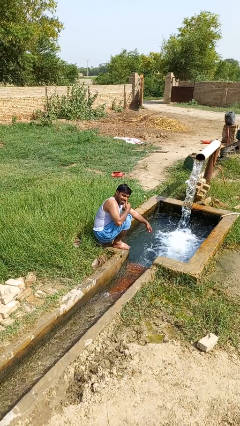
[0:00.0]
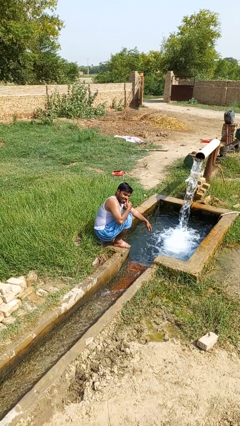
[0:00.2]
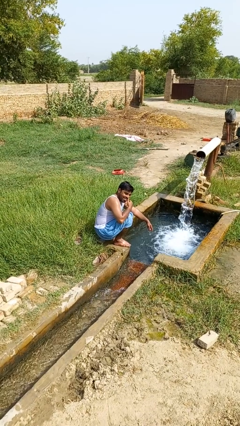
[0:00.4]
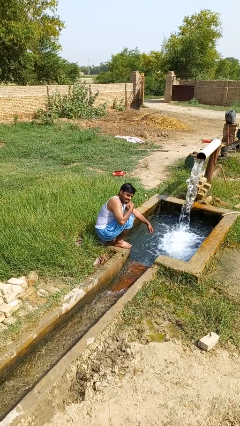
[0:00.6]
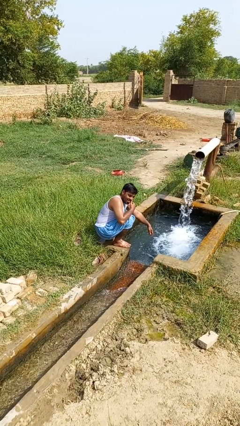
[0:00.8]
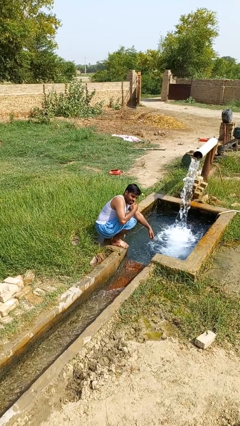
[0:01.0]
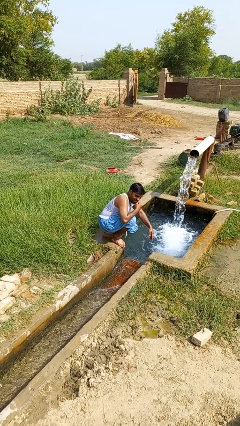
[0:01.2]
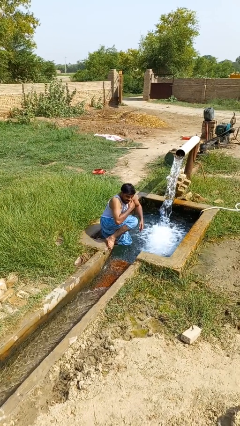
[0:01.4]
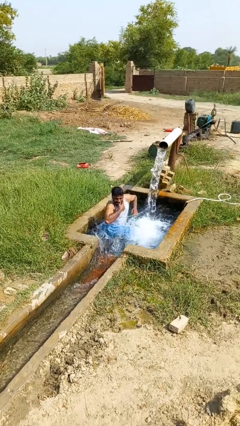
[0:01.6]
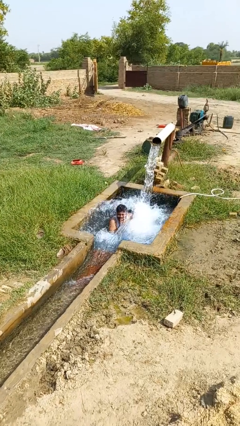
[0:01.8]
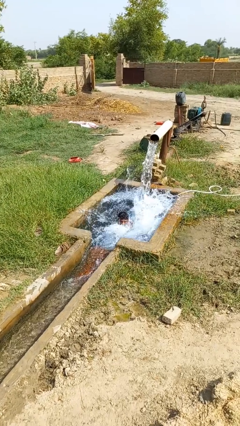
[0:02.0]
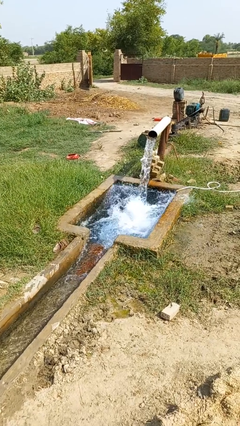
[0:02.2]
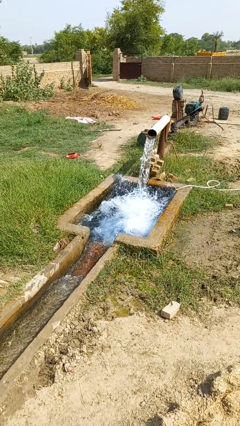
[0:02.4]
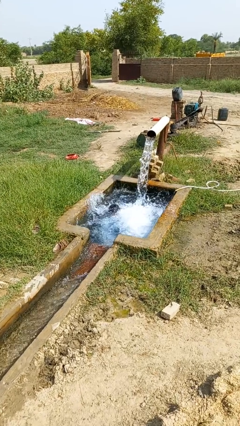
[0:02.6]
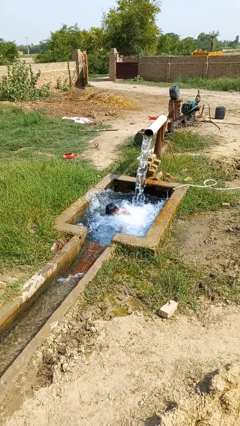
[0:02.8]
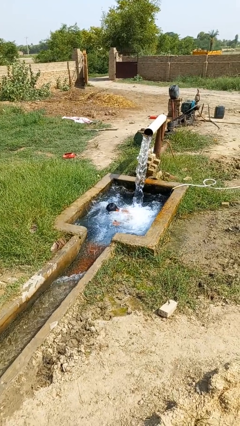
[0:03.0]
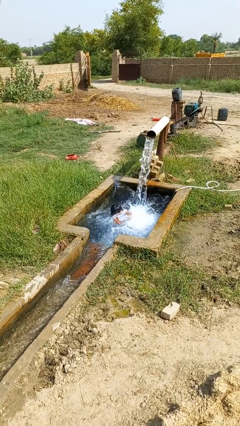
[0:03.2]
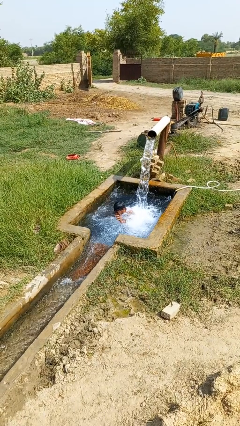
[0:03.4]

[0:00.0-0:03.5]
person falls into pool

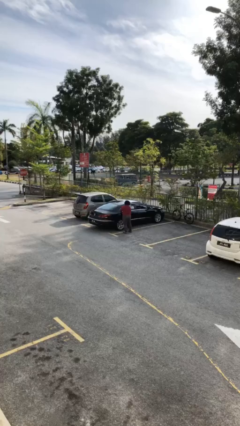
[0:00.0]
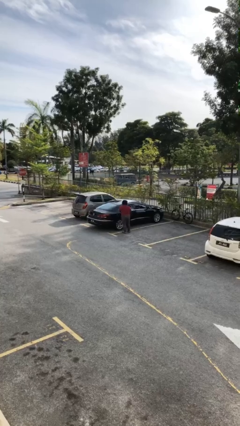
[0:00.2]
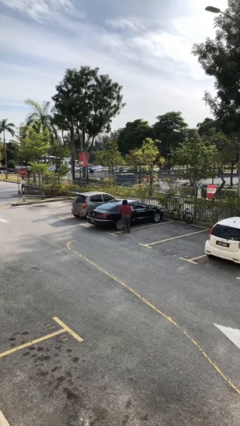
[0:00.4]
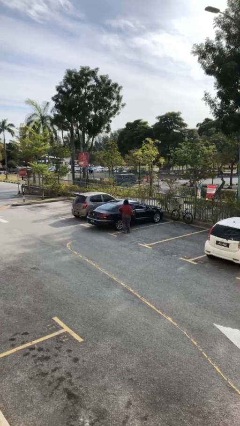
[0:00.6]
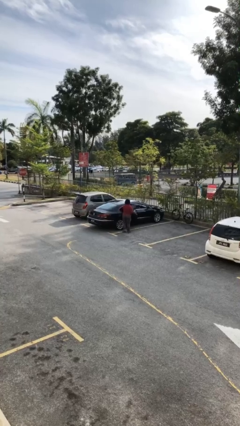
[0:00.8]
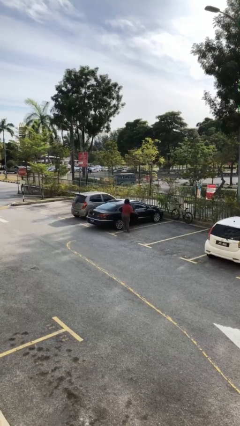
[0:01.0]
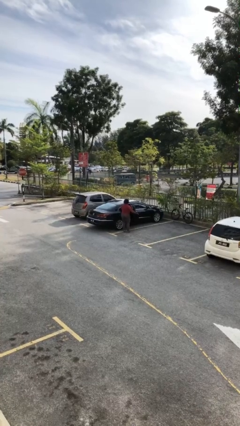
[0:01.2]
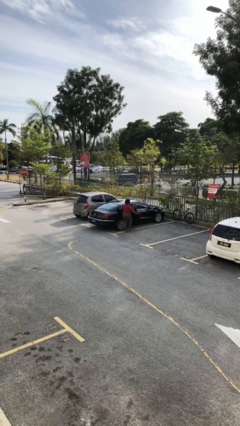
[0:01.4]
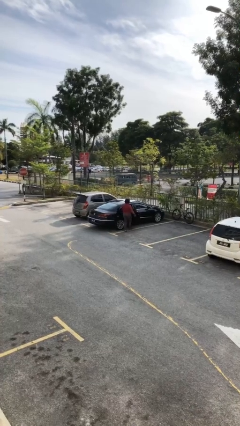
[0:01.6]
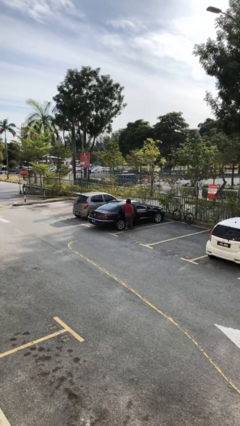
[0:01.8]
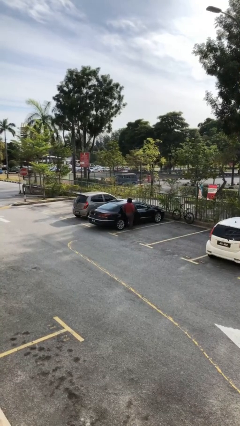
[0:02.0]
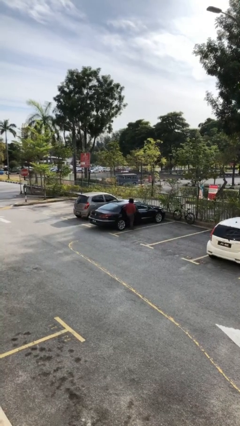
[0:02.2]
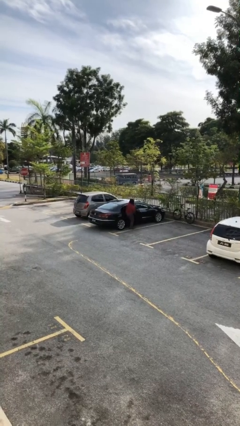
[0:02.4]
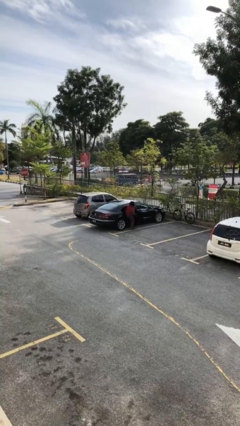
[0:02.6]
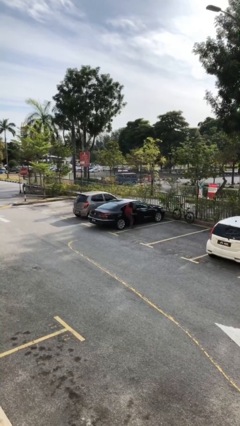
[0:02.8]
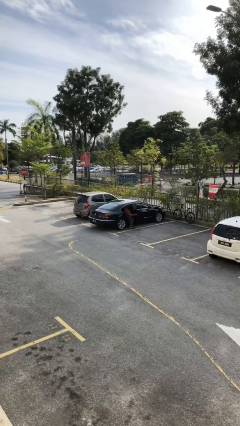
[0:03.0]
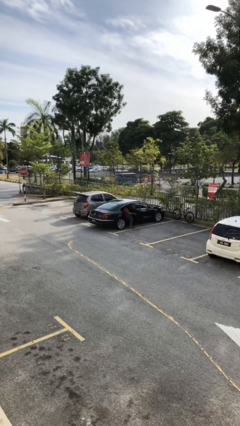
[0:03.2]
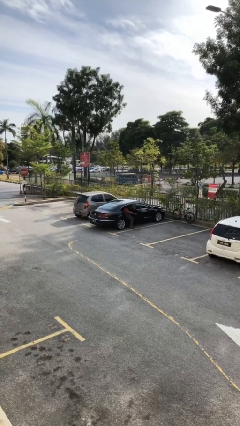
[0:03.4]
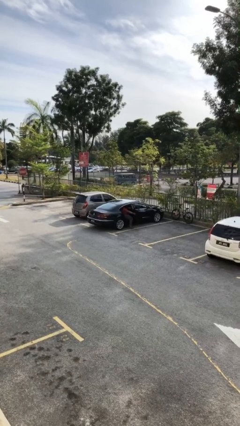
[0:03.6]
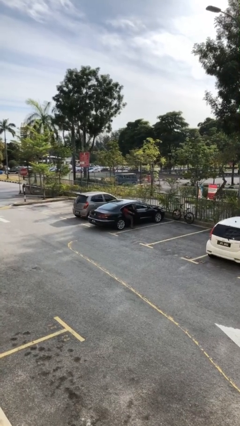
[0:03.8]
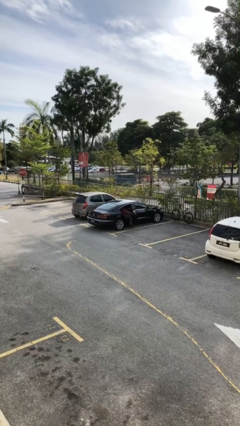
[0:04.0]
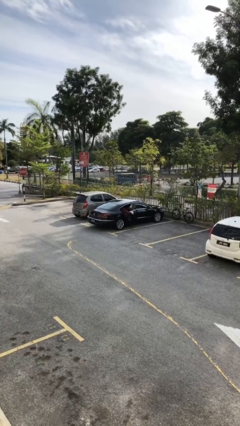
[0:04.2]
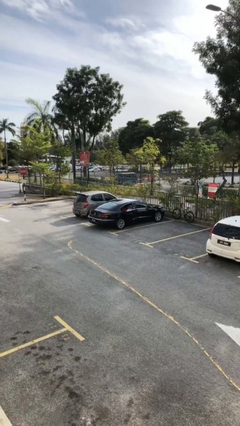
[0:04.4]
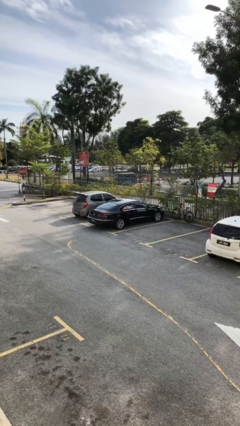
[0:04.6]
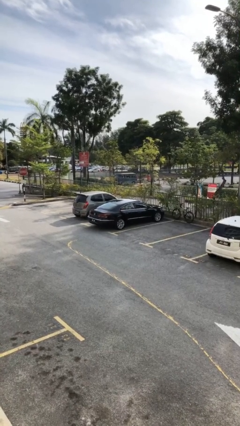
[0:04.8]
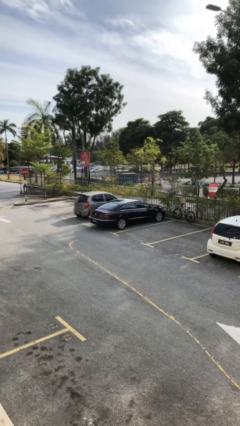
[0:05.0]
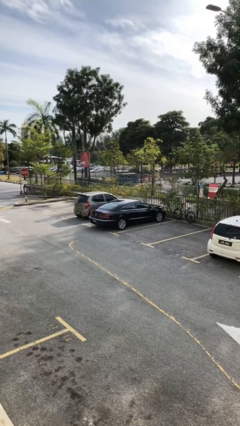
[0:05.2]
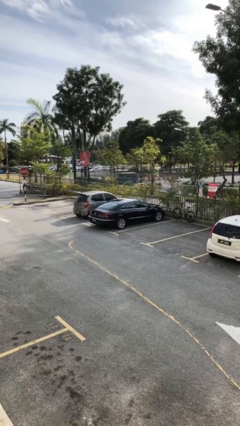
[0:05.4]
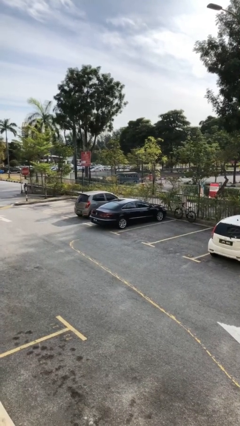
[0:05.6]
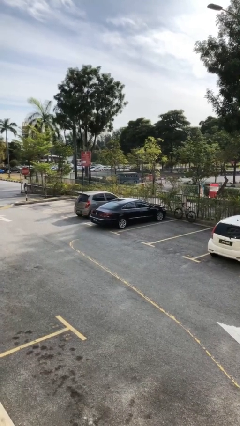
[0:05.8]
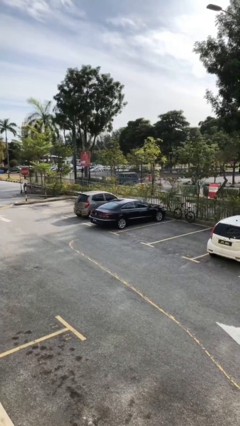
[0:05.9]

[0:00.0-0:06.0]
car picks up person

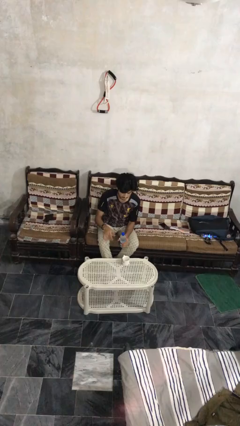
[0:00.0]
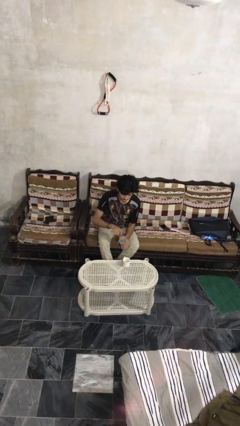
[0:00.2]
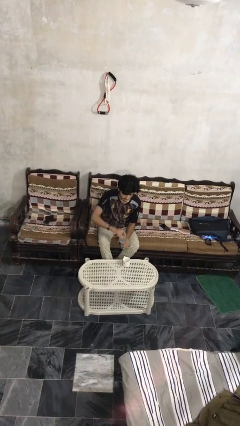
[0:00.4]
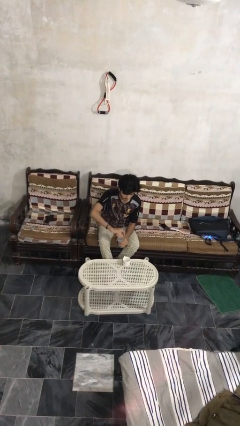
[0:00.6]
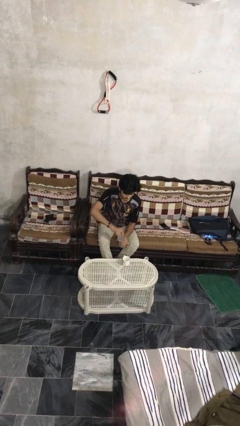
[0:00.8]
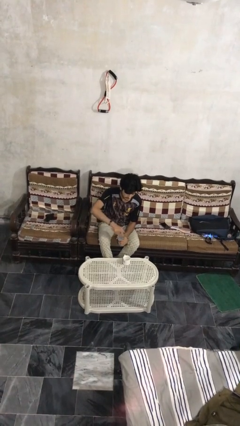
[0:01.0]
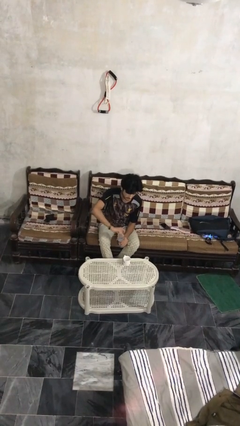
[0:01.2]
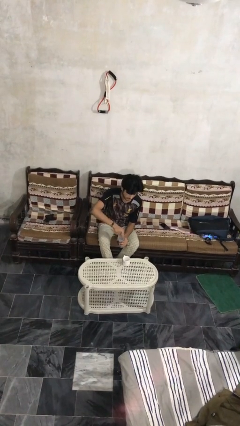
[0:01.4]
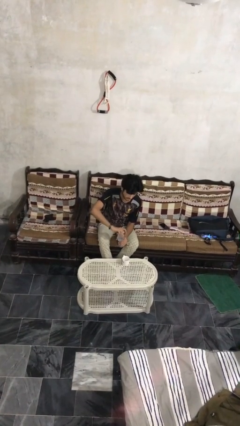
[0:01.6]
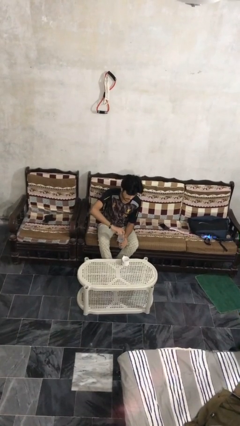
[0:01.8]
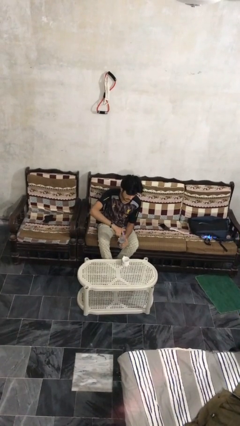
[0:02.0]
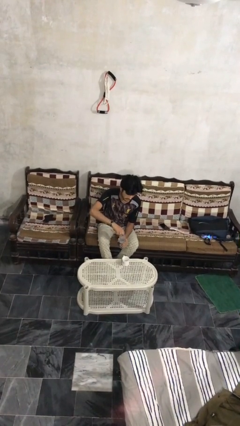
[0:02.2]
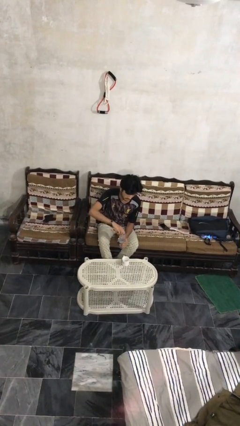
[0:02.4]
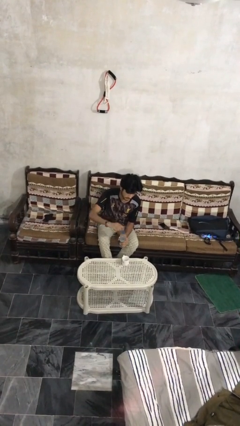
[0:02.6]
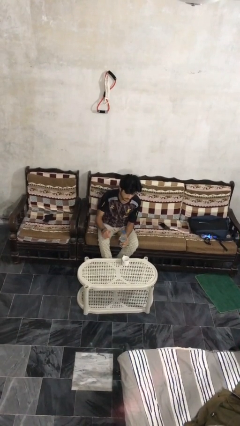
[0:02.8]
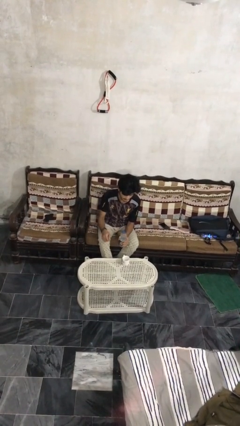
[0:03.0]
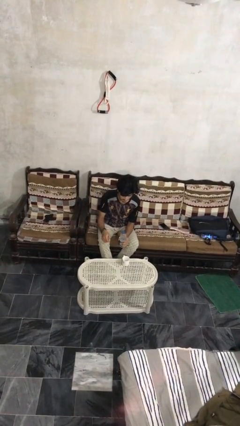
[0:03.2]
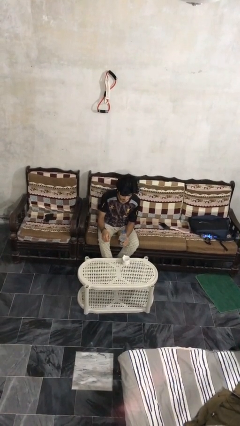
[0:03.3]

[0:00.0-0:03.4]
person unscrews lid from bottle

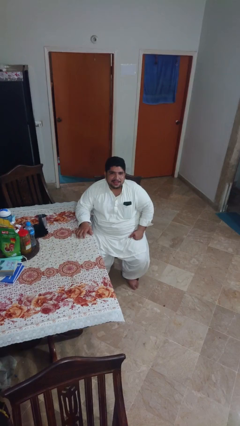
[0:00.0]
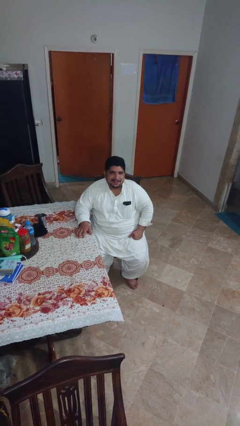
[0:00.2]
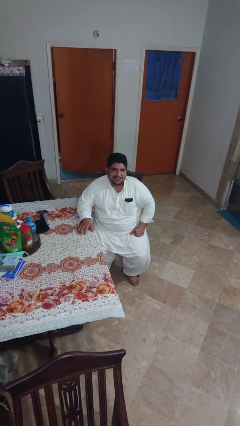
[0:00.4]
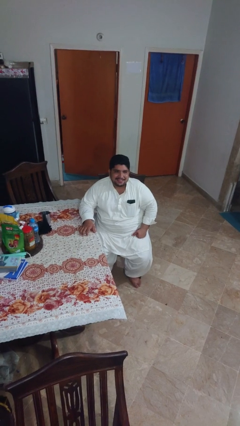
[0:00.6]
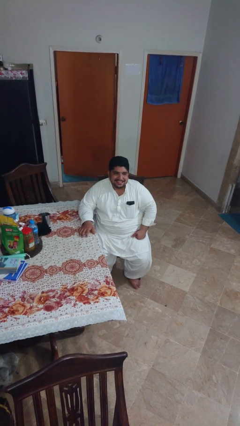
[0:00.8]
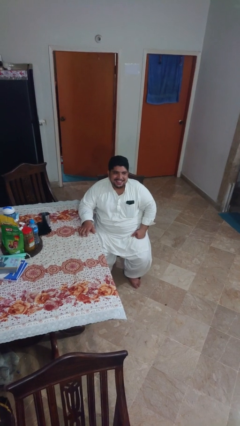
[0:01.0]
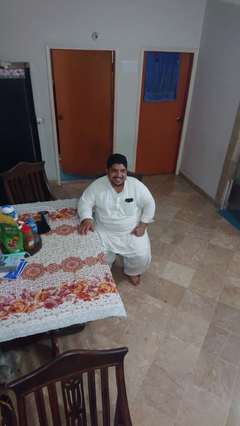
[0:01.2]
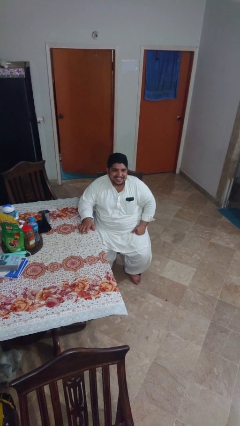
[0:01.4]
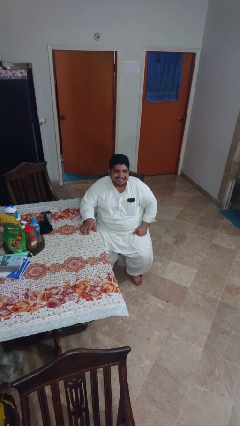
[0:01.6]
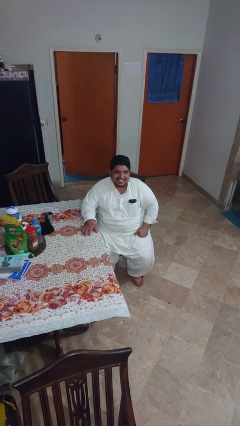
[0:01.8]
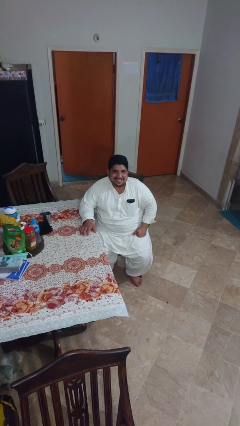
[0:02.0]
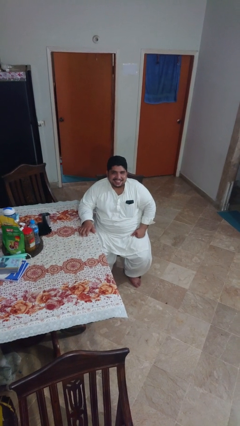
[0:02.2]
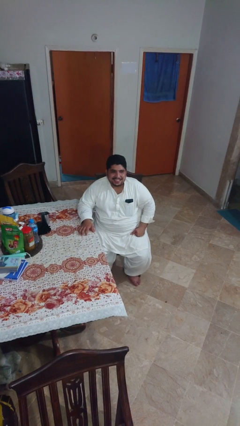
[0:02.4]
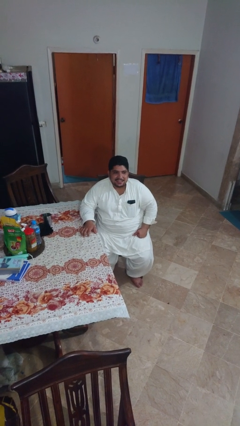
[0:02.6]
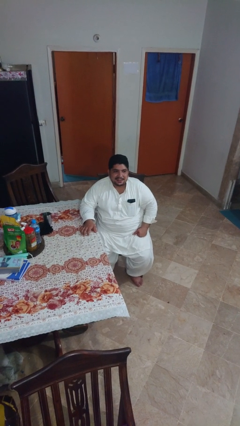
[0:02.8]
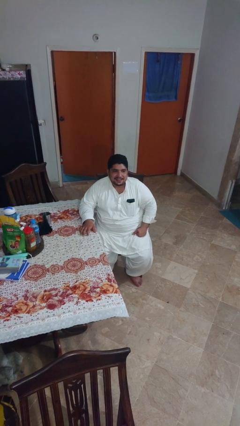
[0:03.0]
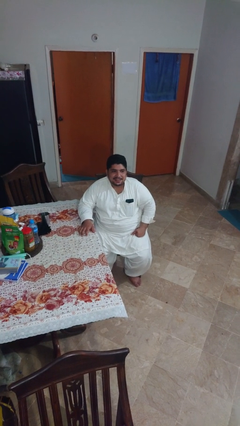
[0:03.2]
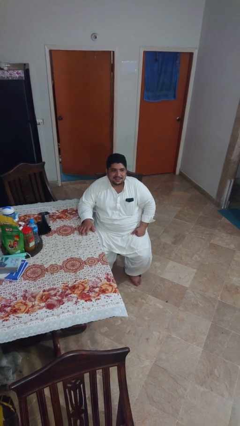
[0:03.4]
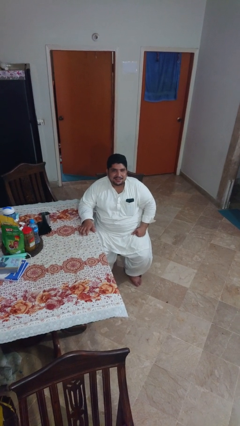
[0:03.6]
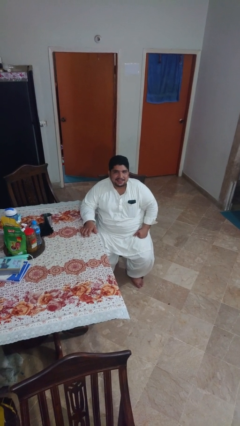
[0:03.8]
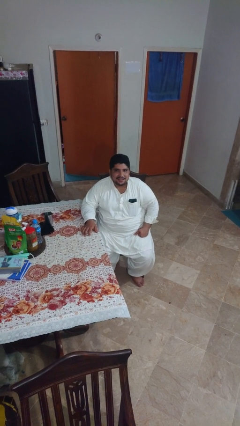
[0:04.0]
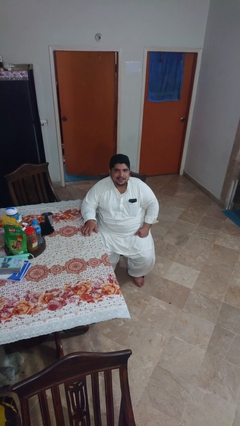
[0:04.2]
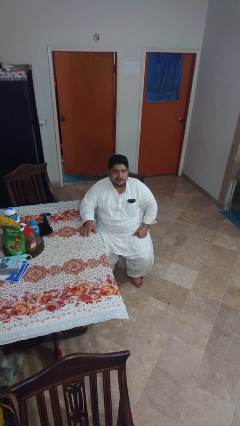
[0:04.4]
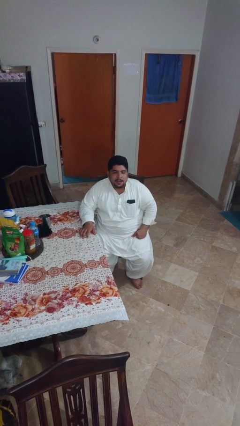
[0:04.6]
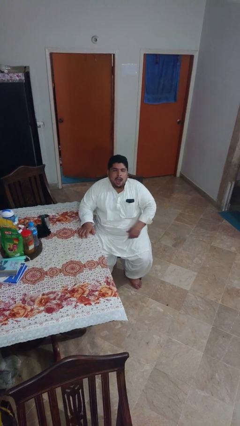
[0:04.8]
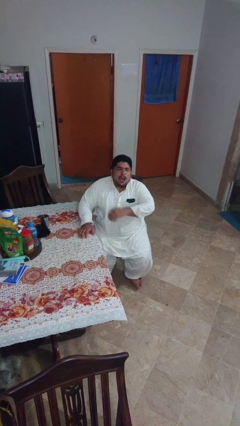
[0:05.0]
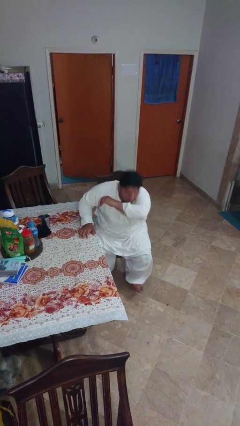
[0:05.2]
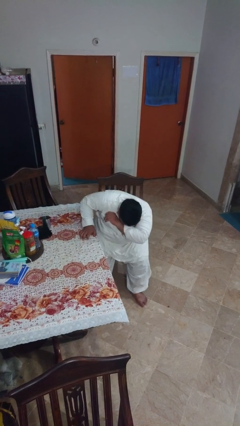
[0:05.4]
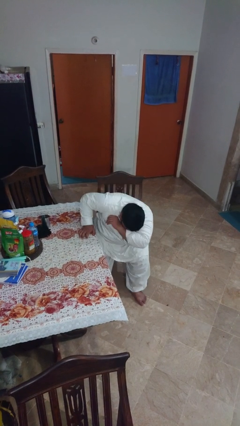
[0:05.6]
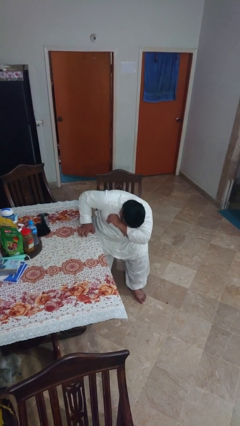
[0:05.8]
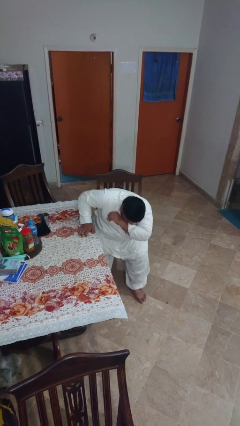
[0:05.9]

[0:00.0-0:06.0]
person sneezes into arm
